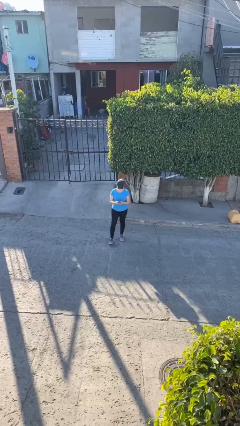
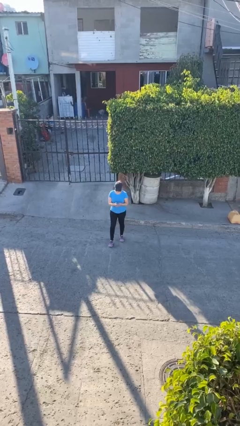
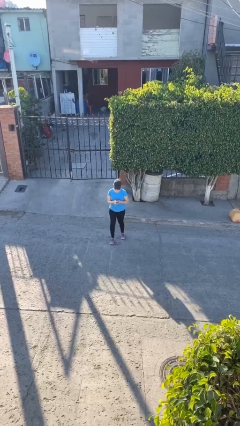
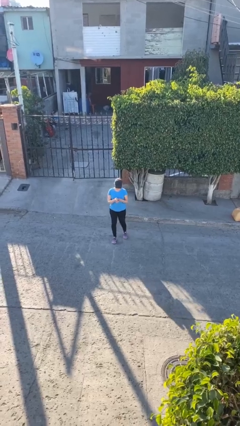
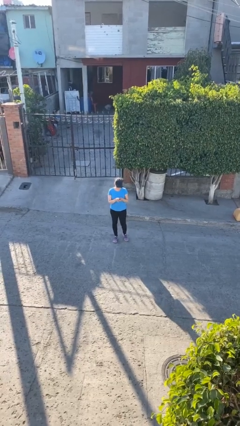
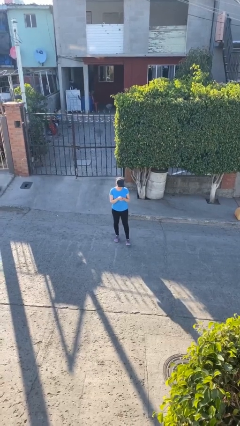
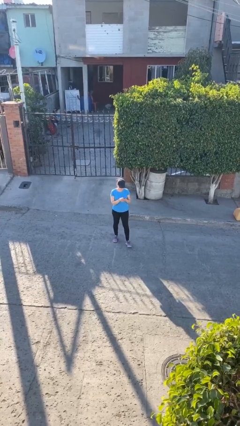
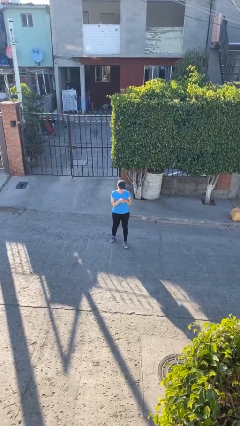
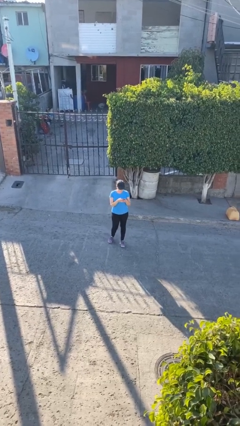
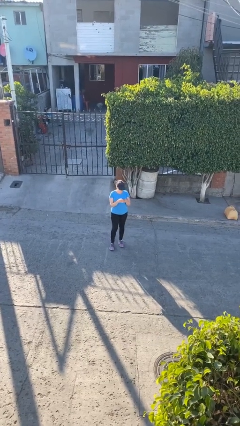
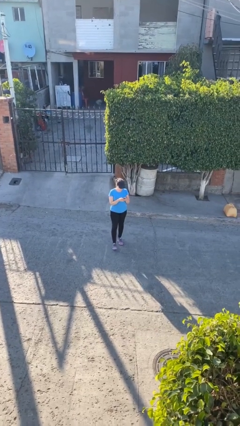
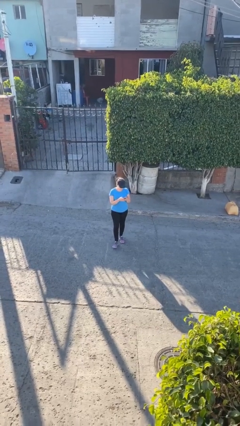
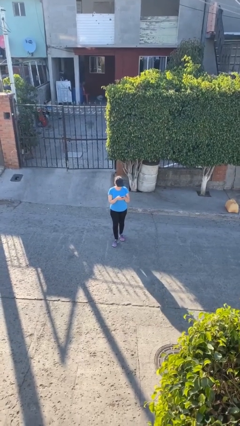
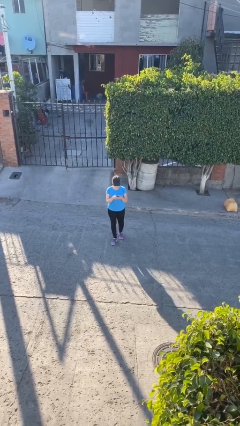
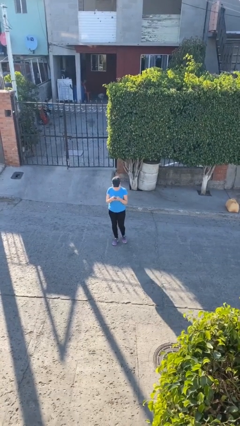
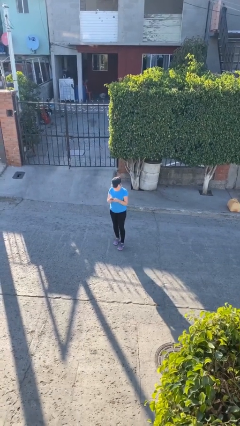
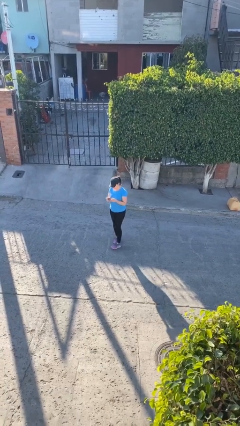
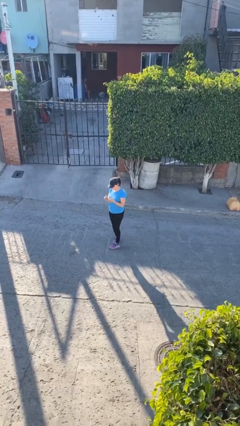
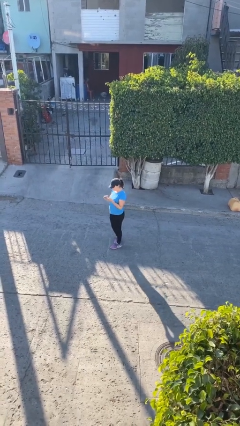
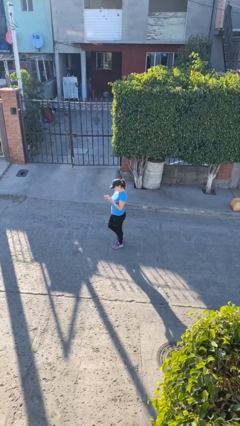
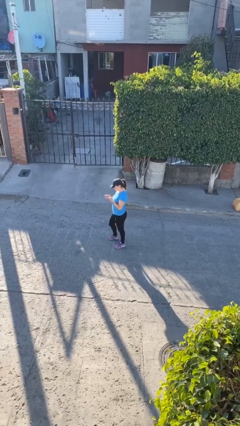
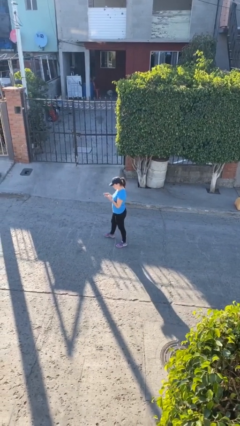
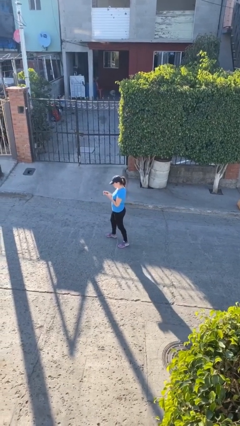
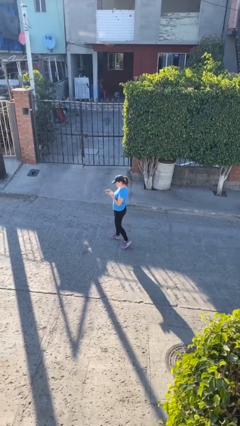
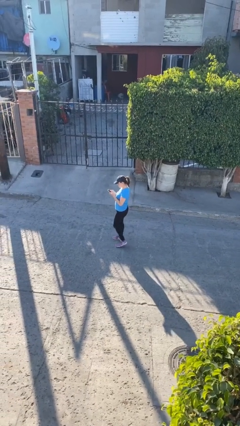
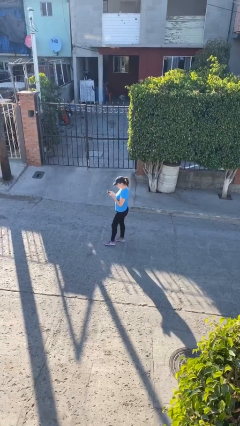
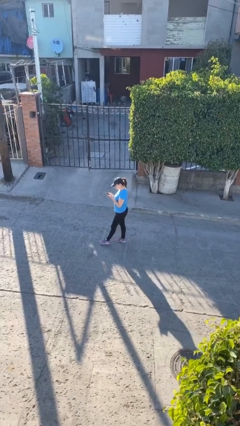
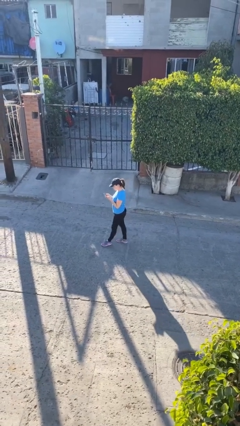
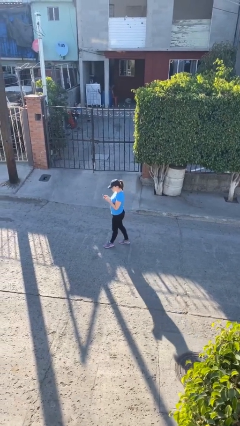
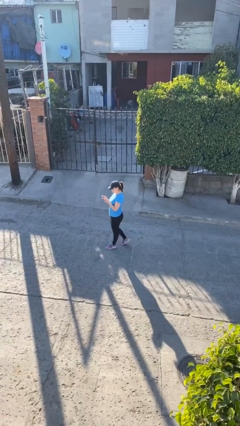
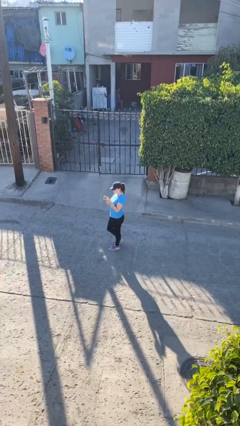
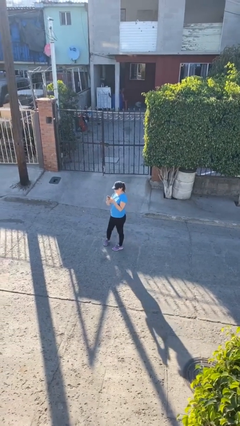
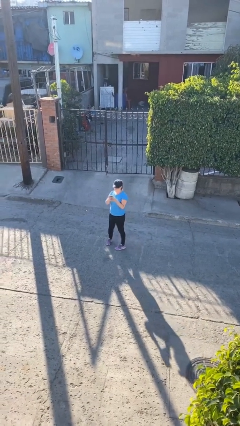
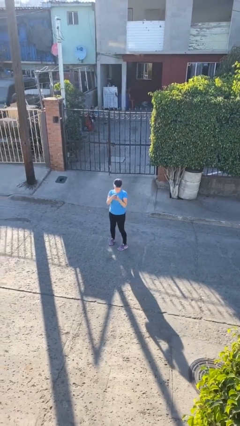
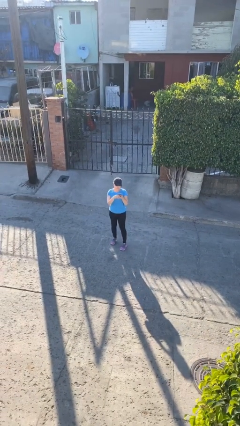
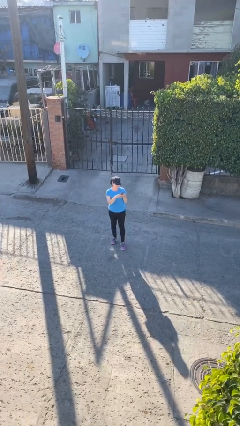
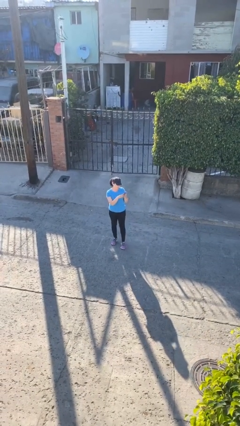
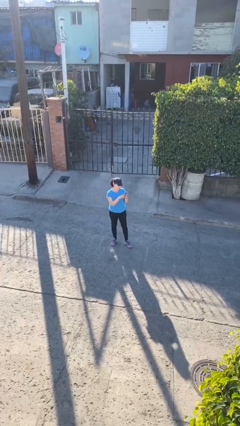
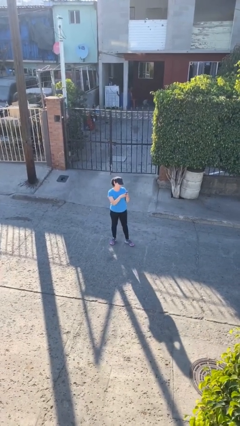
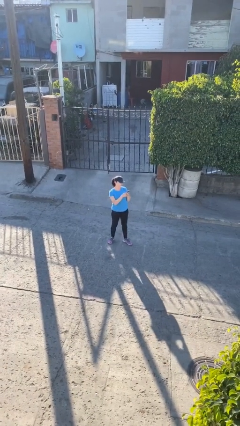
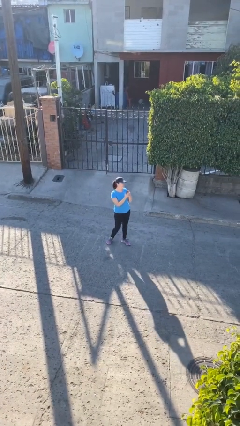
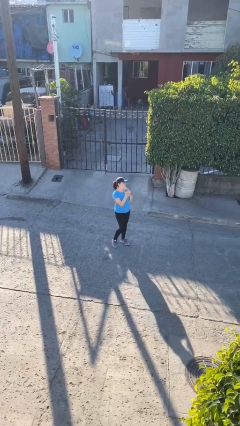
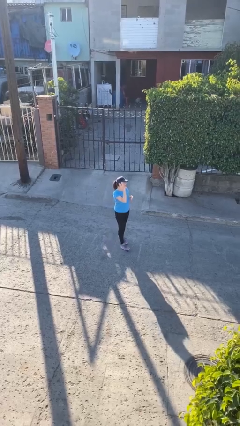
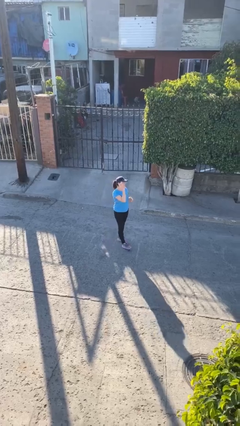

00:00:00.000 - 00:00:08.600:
person texts on phone

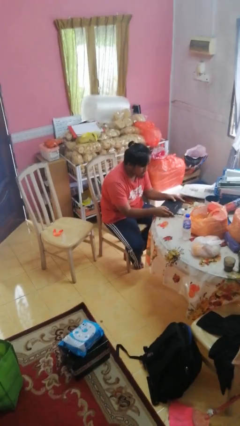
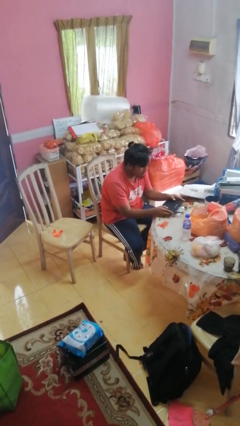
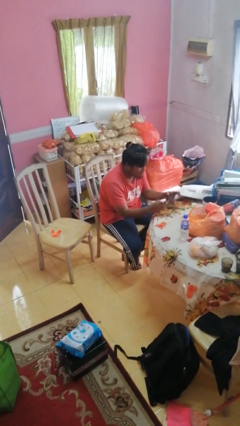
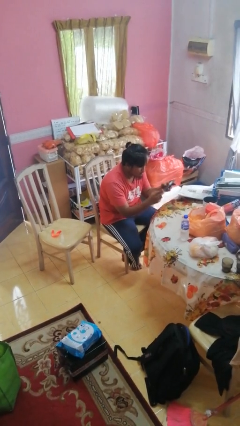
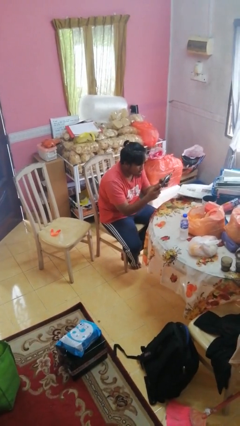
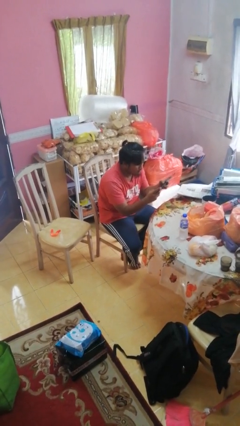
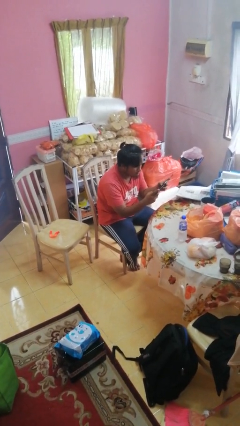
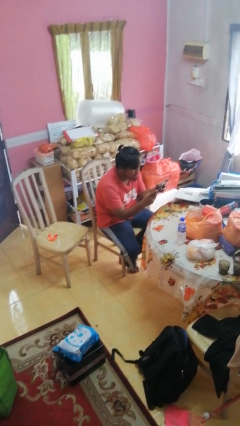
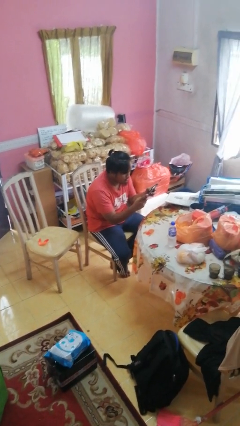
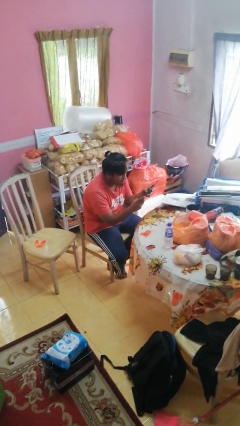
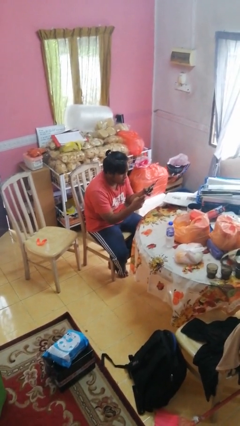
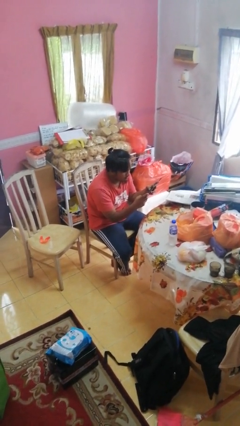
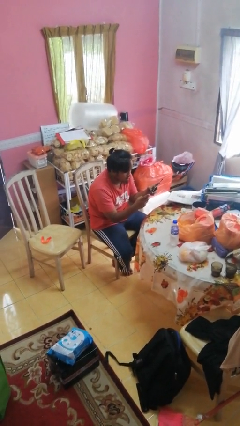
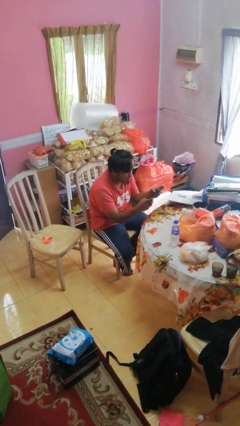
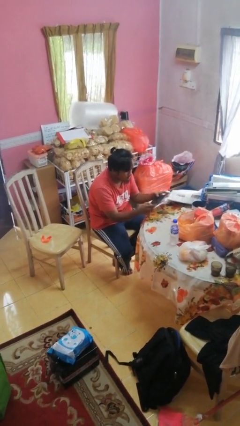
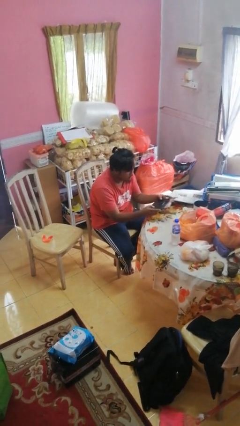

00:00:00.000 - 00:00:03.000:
person interacts with handheld game

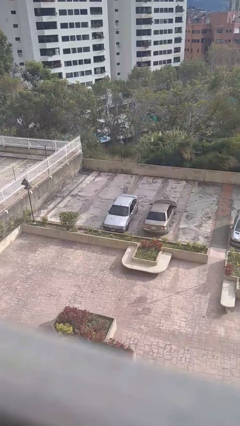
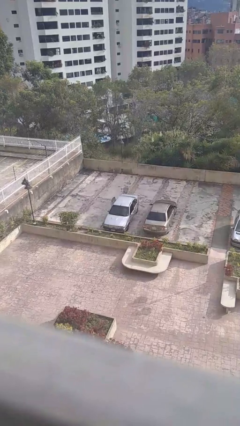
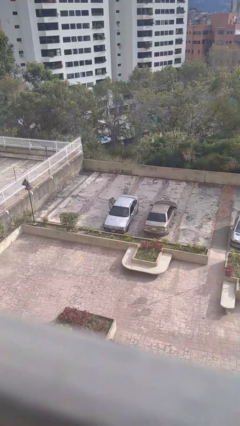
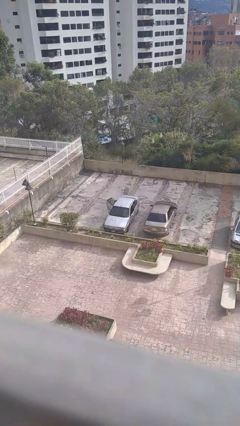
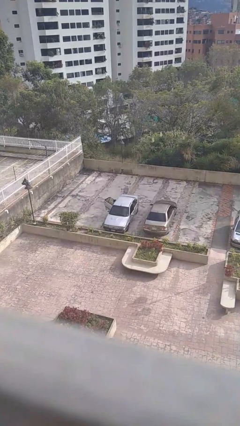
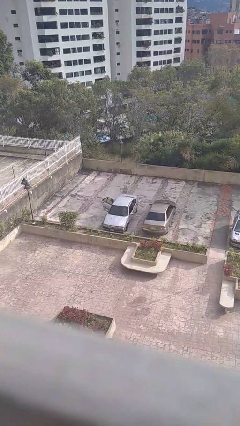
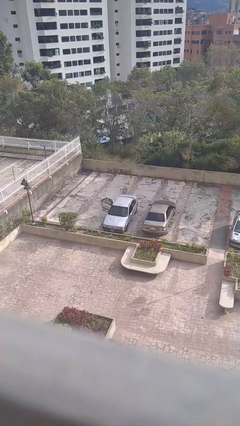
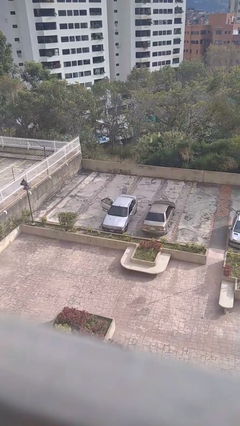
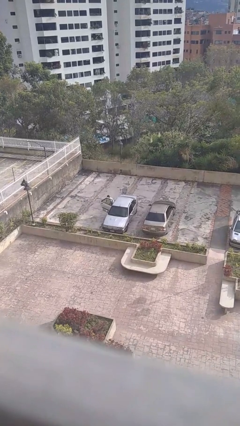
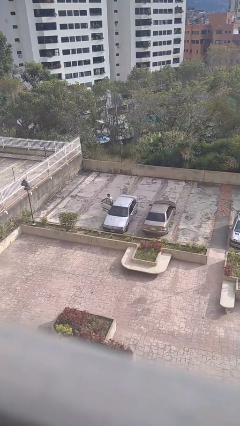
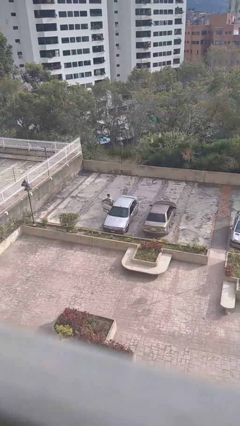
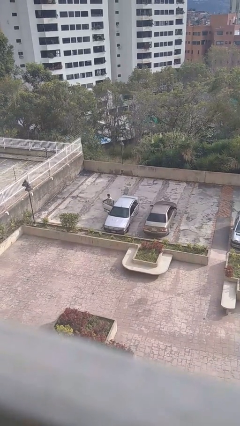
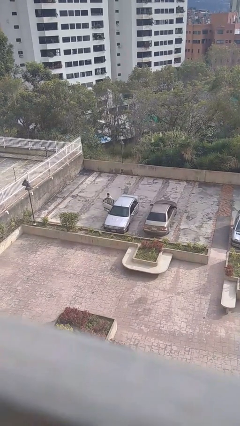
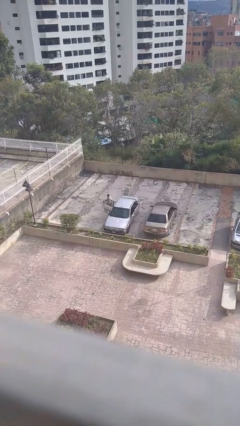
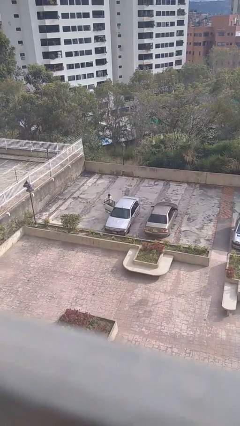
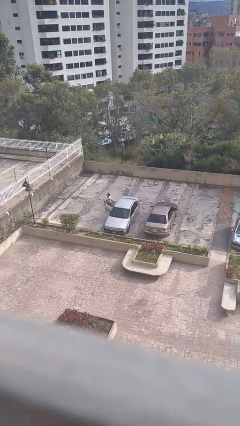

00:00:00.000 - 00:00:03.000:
car drops off person

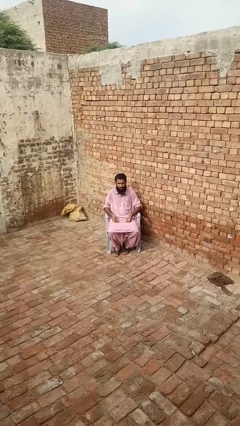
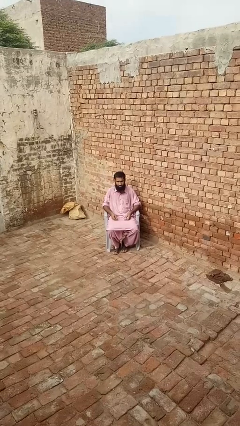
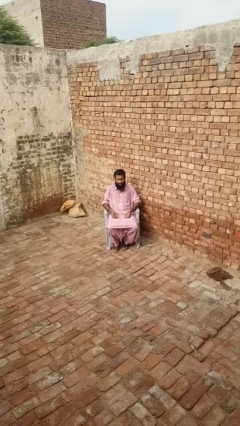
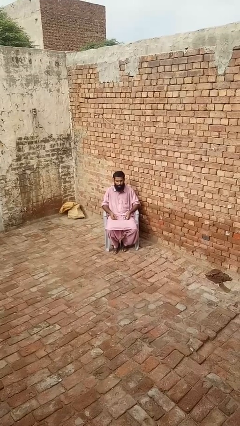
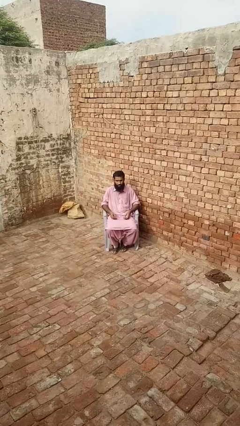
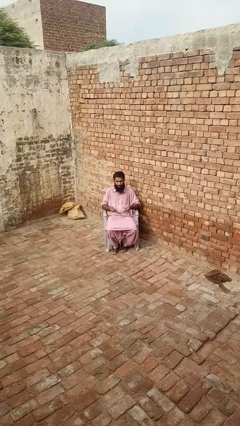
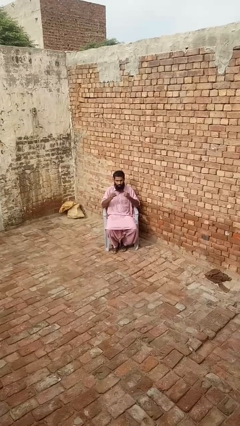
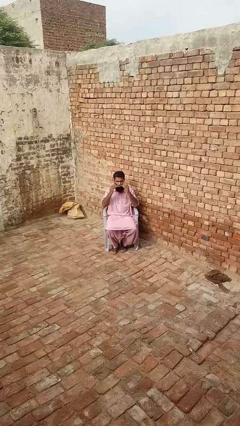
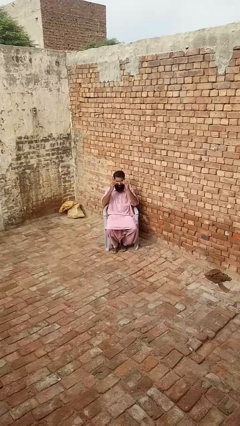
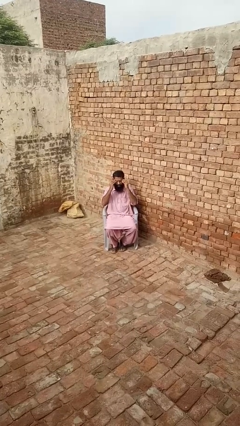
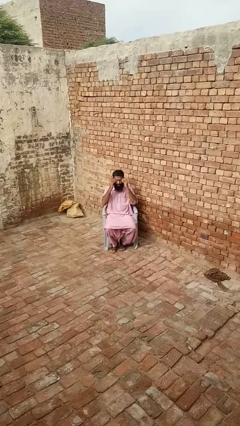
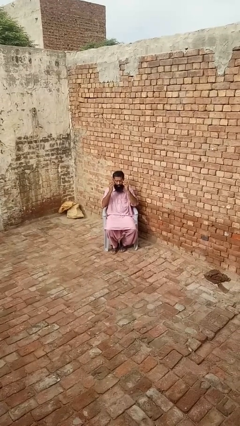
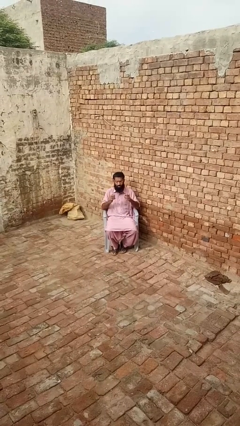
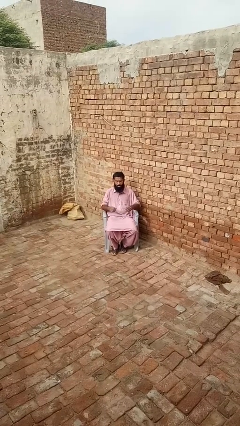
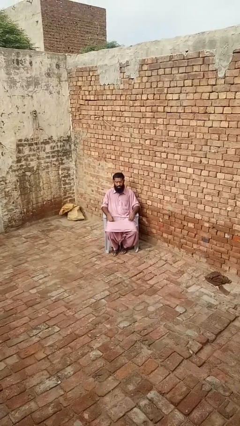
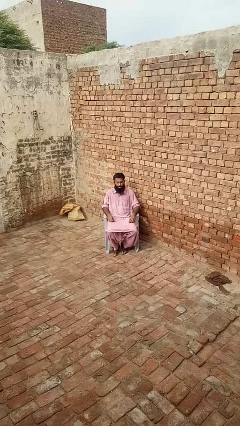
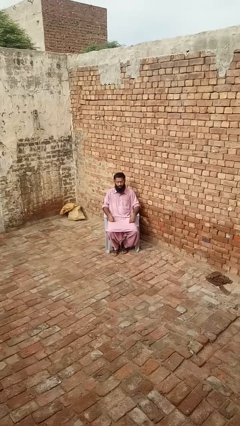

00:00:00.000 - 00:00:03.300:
person puts on glasses
